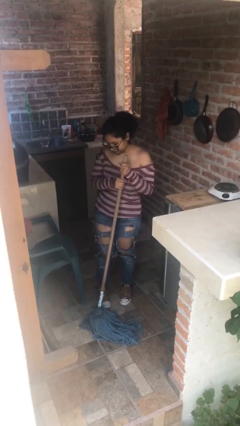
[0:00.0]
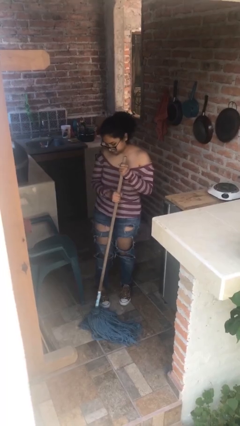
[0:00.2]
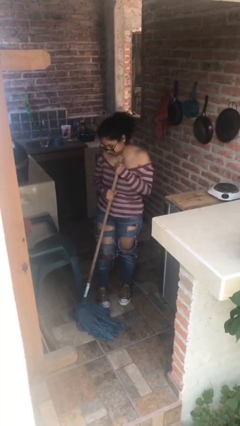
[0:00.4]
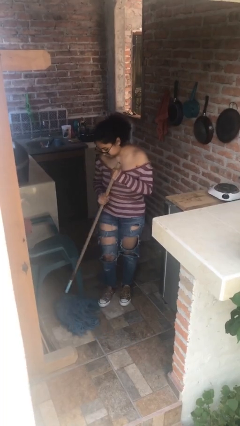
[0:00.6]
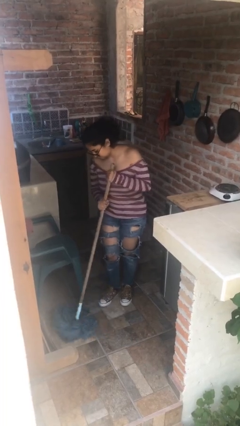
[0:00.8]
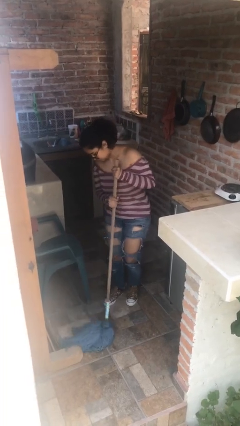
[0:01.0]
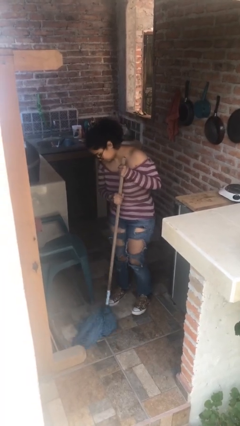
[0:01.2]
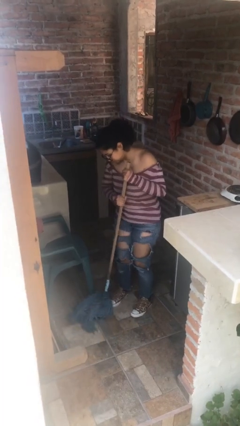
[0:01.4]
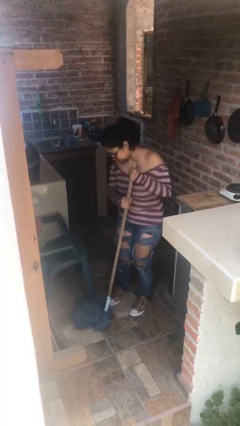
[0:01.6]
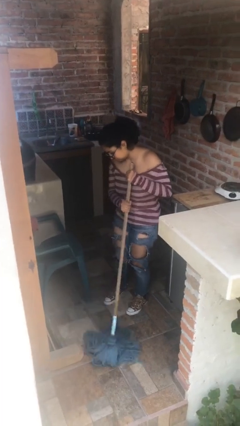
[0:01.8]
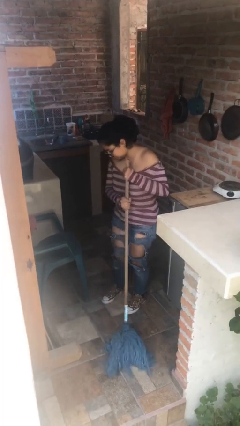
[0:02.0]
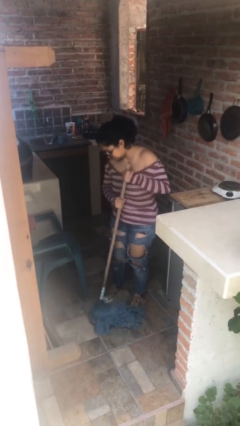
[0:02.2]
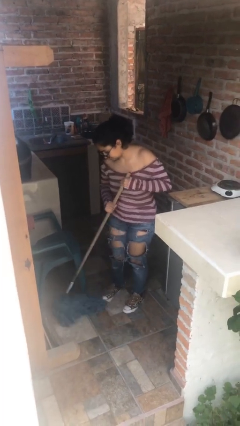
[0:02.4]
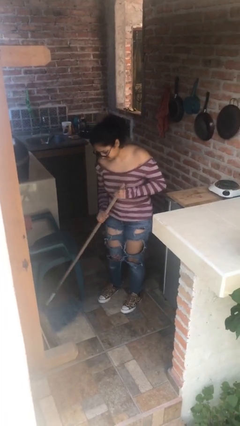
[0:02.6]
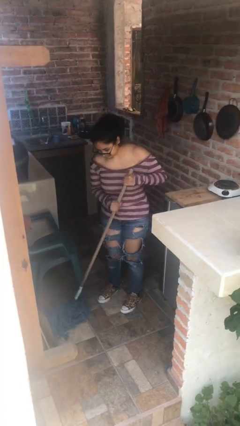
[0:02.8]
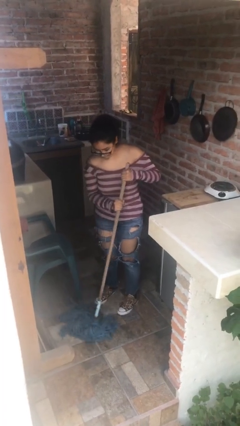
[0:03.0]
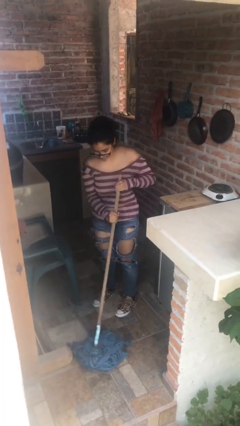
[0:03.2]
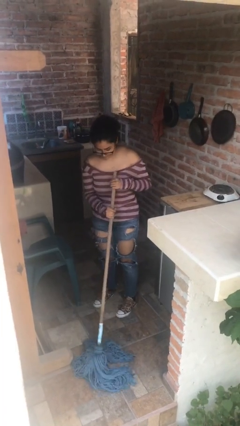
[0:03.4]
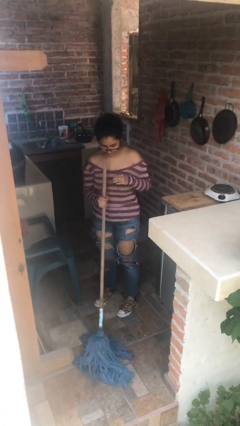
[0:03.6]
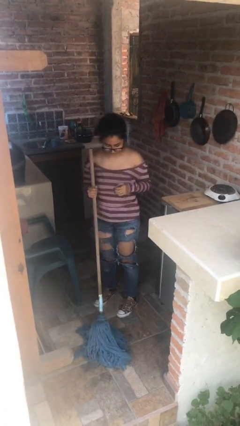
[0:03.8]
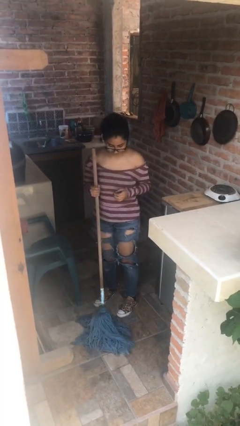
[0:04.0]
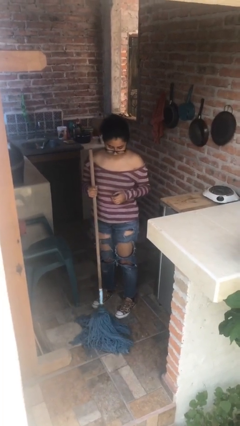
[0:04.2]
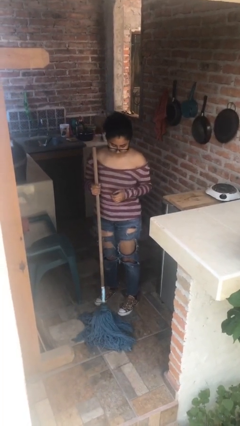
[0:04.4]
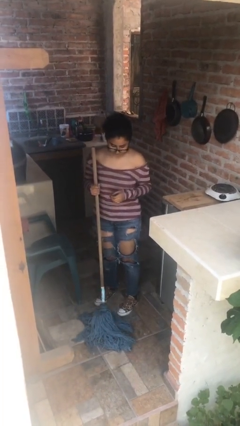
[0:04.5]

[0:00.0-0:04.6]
person mops

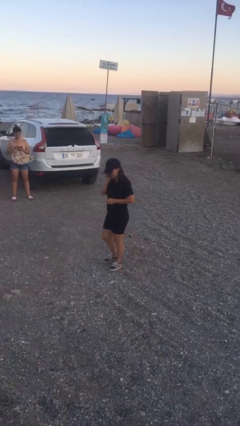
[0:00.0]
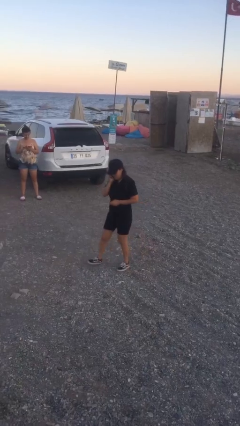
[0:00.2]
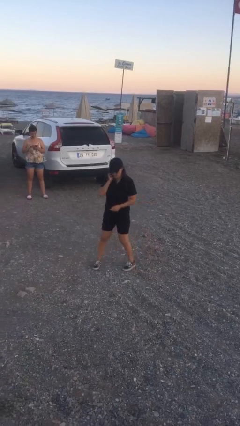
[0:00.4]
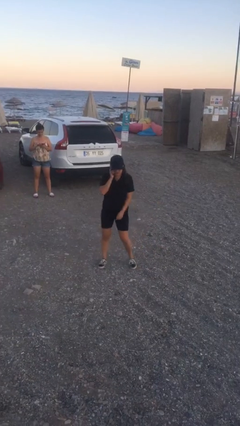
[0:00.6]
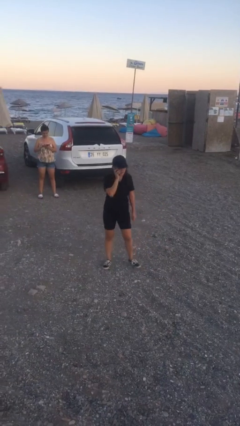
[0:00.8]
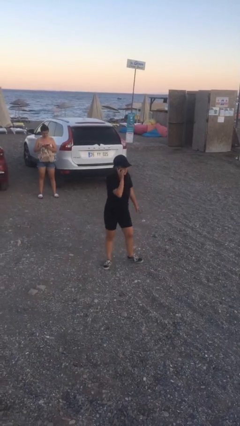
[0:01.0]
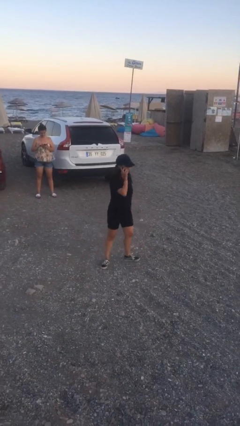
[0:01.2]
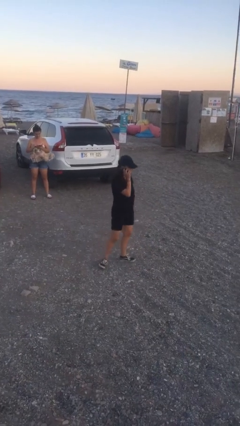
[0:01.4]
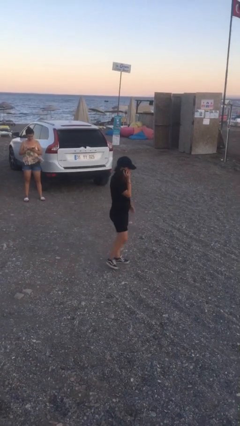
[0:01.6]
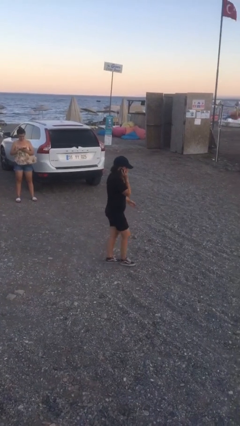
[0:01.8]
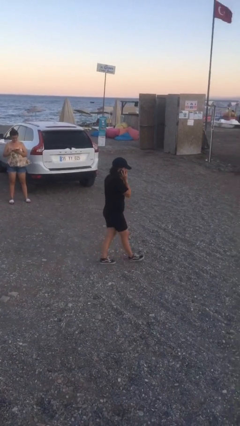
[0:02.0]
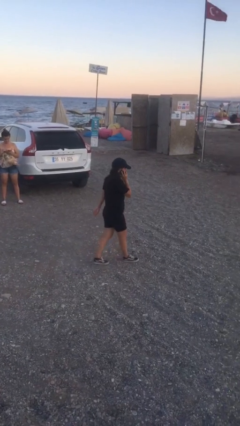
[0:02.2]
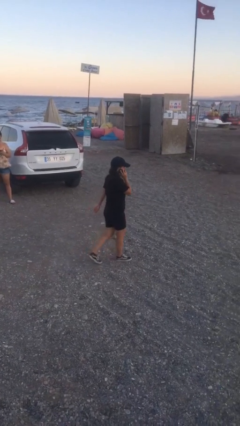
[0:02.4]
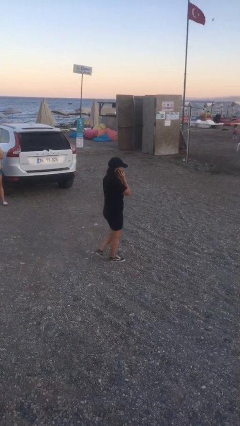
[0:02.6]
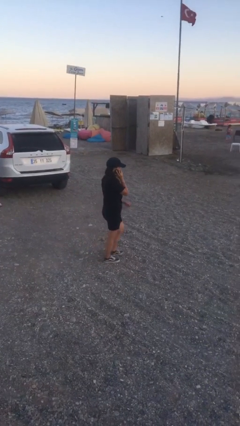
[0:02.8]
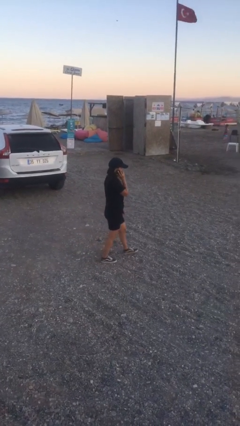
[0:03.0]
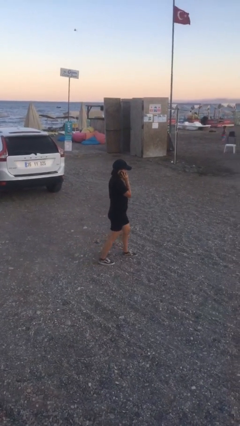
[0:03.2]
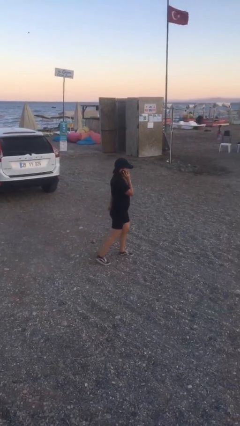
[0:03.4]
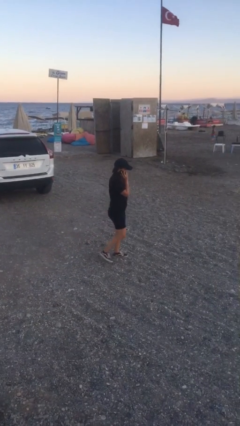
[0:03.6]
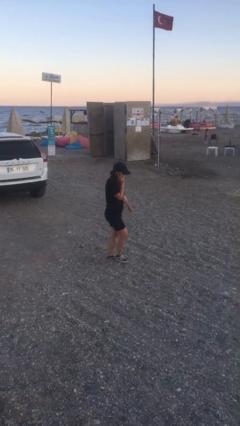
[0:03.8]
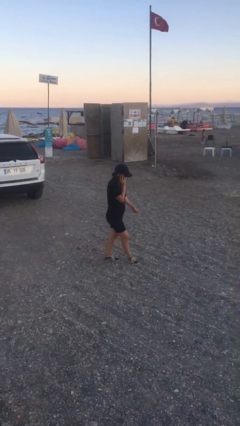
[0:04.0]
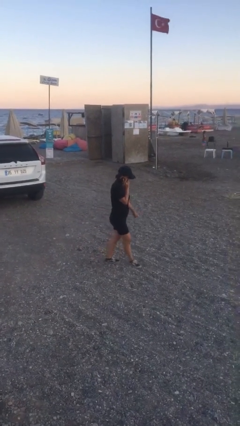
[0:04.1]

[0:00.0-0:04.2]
person talks on phone

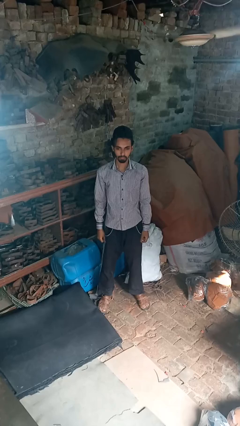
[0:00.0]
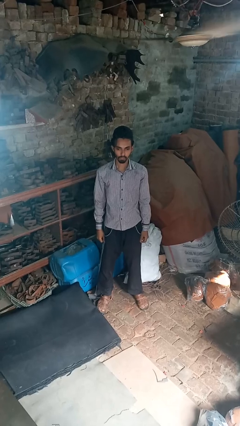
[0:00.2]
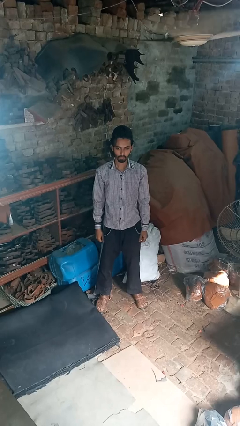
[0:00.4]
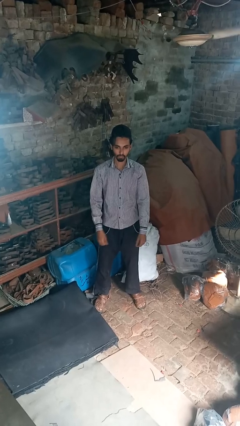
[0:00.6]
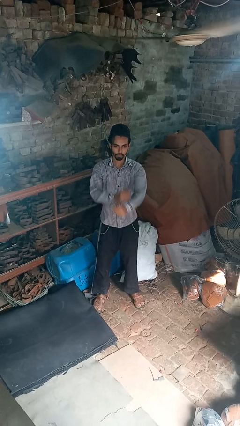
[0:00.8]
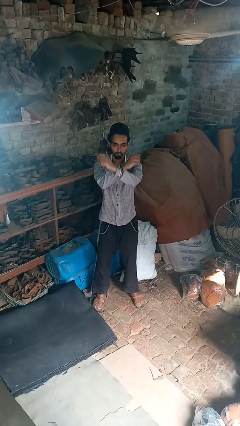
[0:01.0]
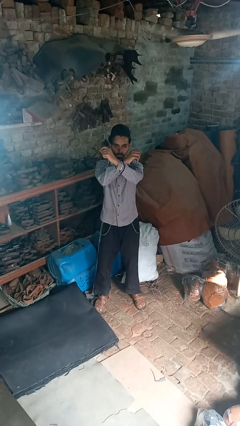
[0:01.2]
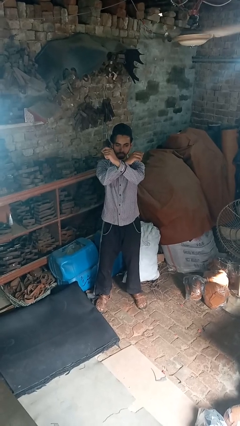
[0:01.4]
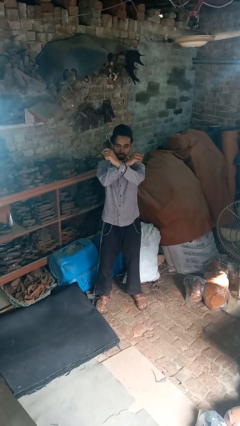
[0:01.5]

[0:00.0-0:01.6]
person crosses arms

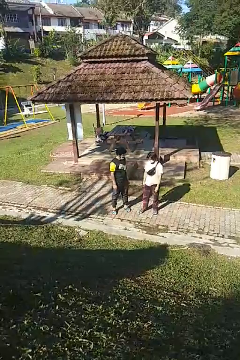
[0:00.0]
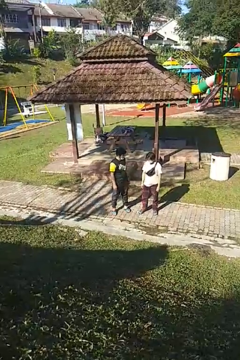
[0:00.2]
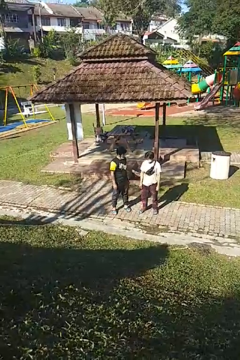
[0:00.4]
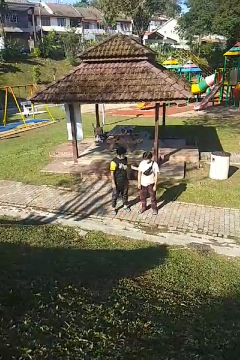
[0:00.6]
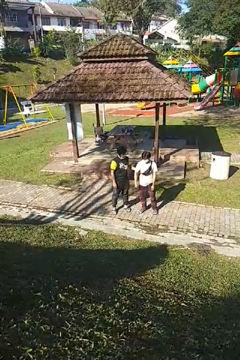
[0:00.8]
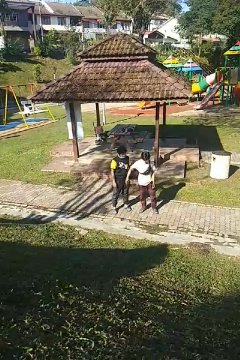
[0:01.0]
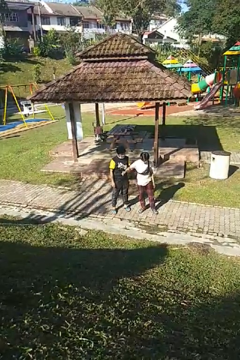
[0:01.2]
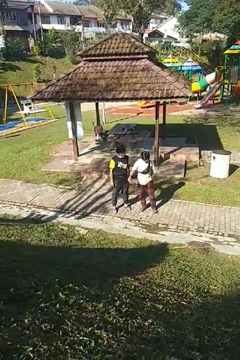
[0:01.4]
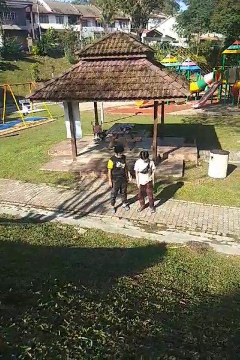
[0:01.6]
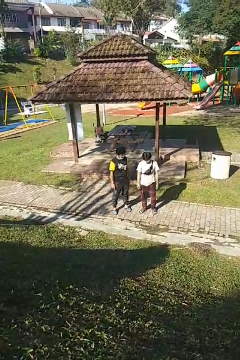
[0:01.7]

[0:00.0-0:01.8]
person grabs person by hair

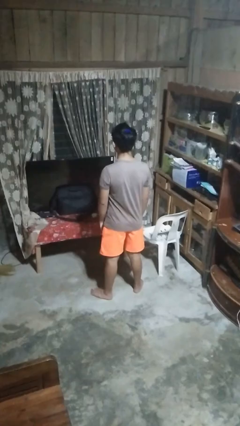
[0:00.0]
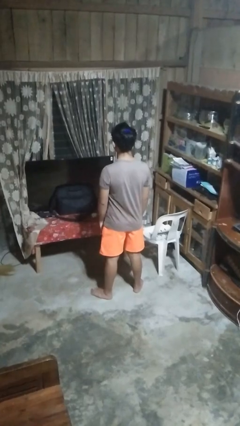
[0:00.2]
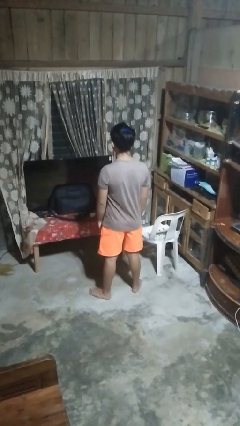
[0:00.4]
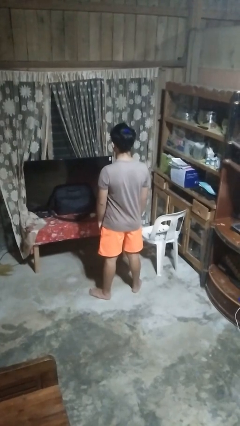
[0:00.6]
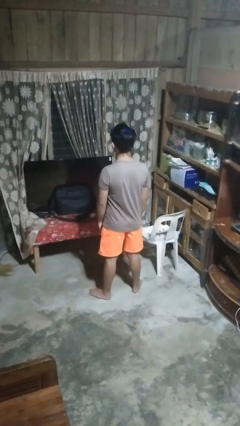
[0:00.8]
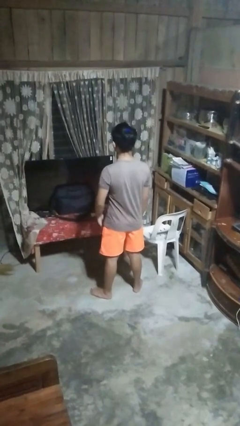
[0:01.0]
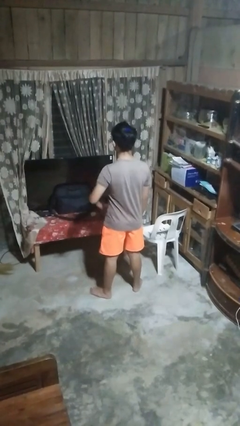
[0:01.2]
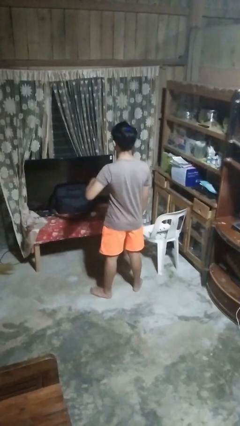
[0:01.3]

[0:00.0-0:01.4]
person gestures call me

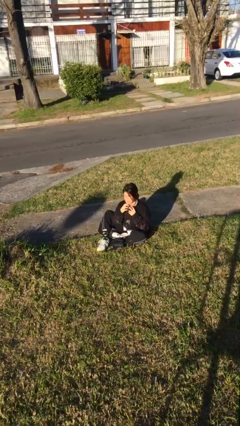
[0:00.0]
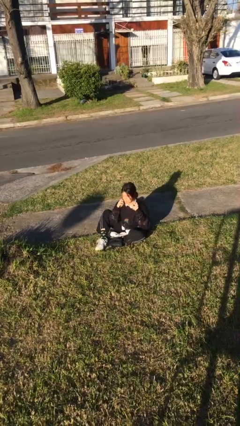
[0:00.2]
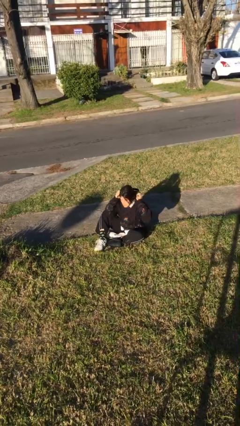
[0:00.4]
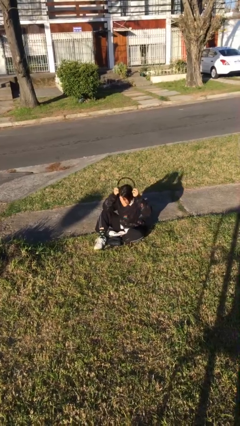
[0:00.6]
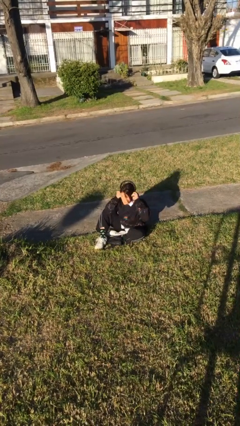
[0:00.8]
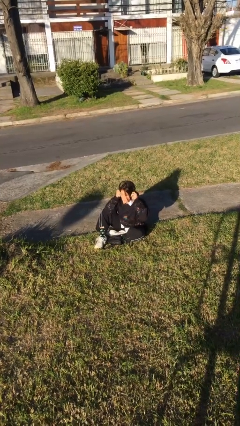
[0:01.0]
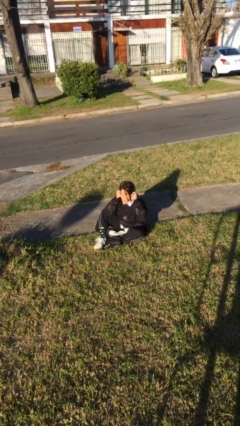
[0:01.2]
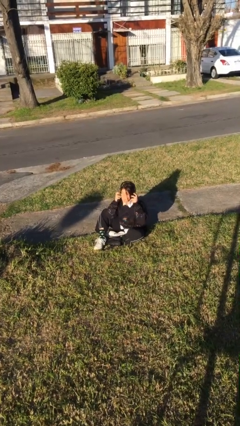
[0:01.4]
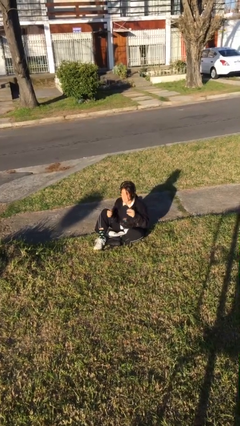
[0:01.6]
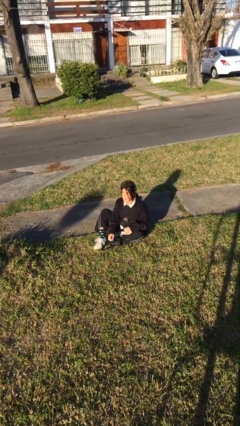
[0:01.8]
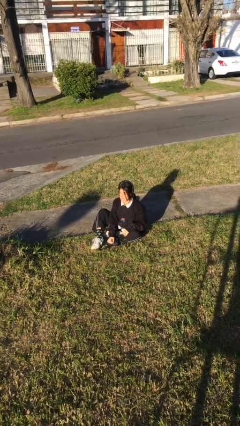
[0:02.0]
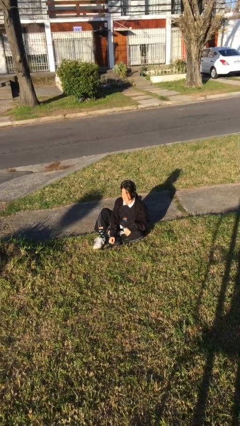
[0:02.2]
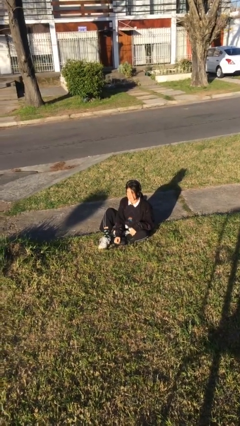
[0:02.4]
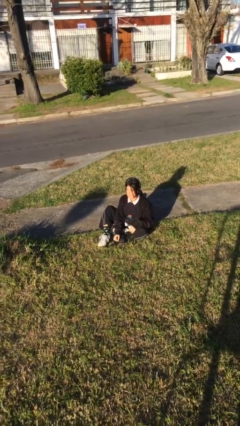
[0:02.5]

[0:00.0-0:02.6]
person puts on headphones

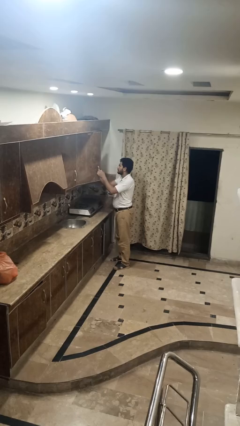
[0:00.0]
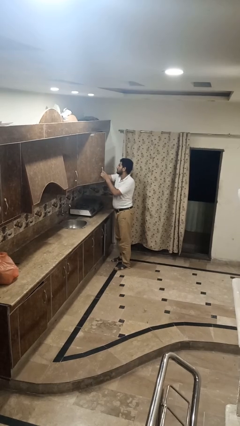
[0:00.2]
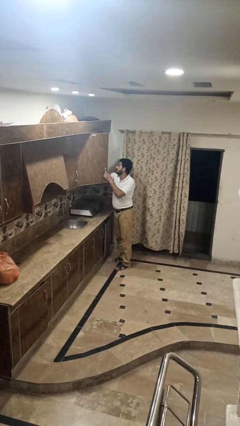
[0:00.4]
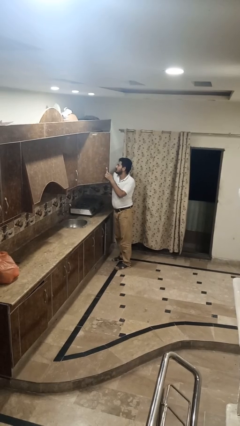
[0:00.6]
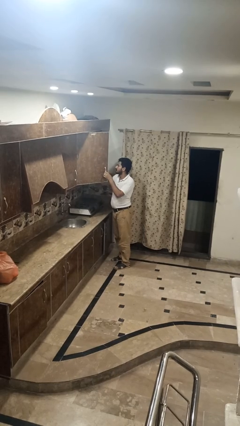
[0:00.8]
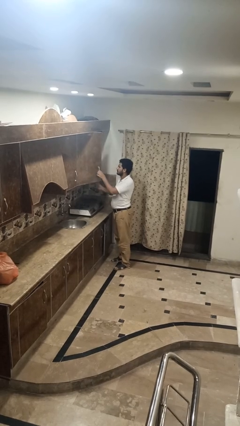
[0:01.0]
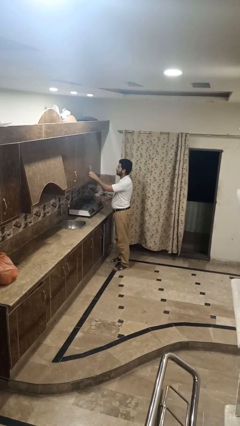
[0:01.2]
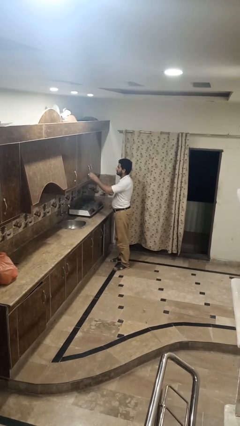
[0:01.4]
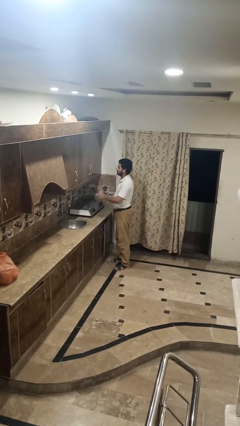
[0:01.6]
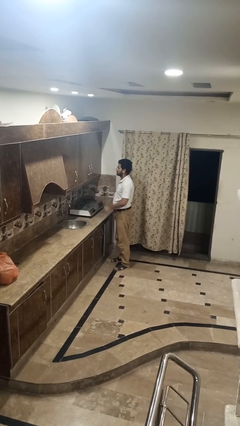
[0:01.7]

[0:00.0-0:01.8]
person puts object into kitchen drawer
